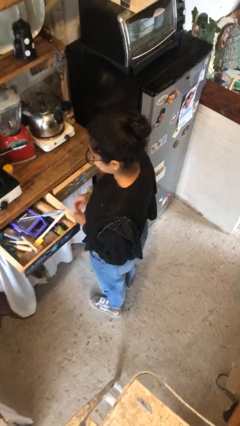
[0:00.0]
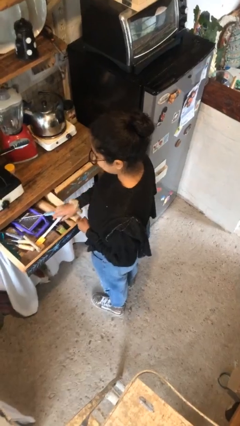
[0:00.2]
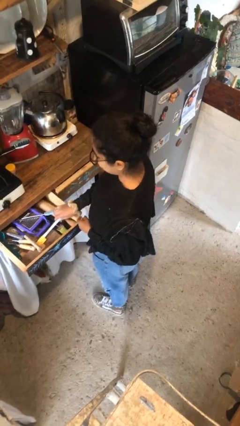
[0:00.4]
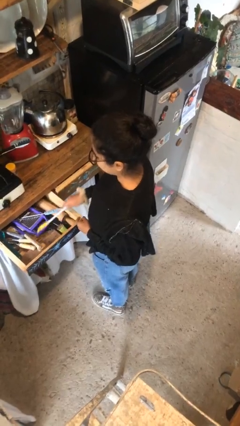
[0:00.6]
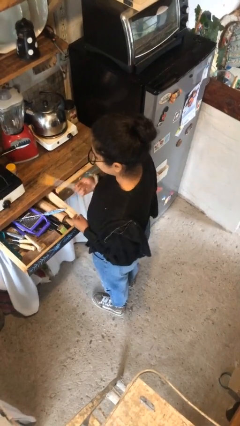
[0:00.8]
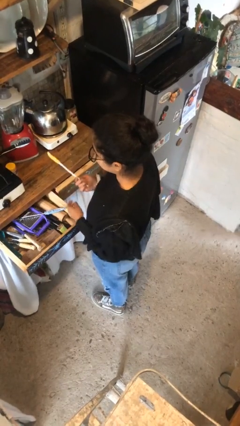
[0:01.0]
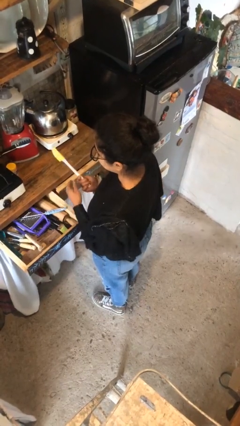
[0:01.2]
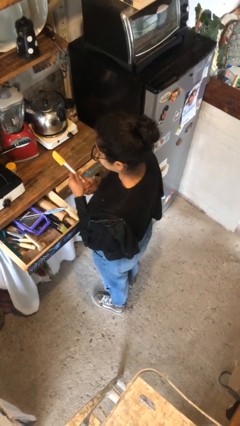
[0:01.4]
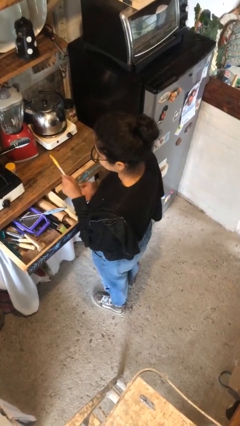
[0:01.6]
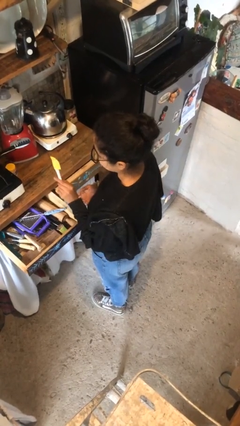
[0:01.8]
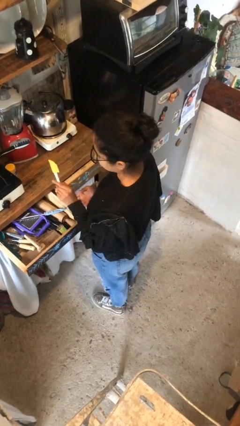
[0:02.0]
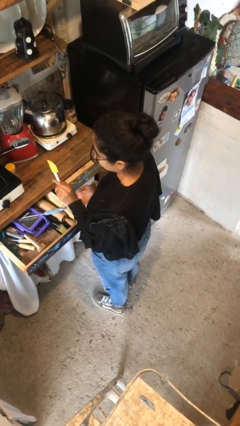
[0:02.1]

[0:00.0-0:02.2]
person takes object from kitchen drawer

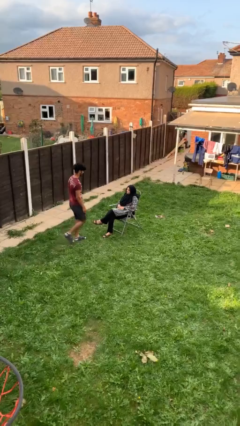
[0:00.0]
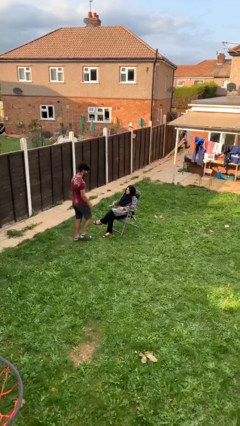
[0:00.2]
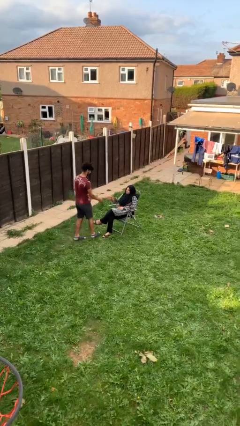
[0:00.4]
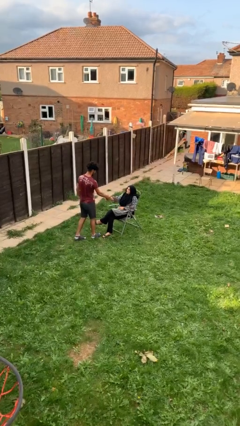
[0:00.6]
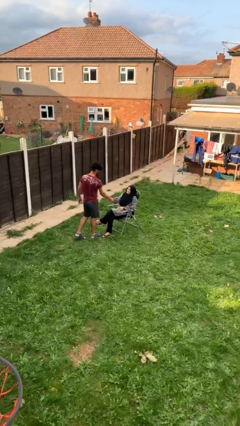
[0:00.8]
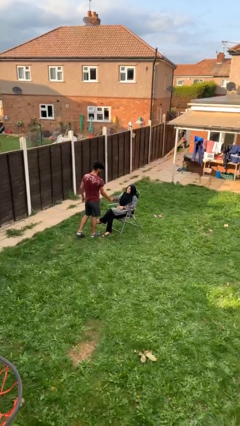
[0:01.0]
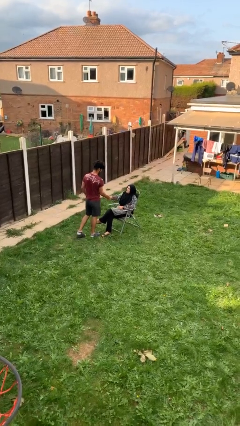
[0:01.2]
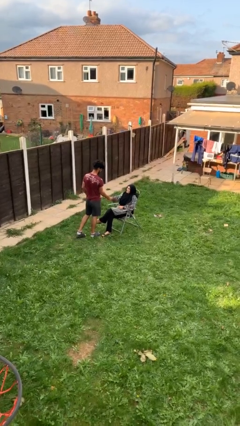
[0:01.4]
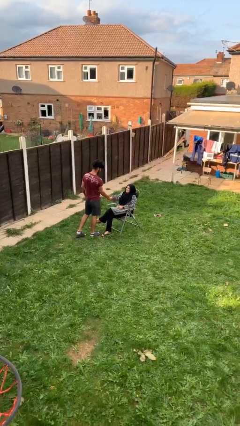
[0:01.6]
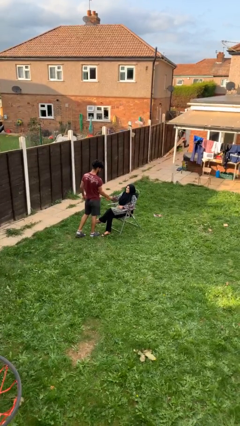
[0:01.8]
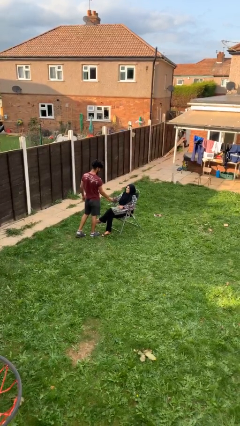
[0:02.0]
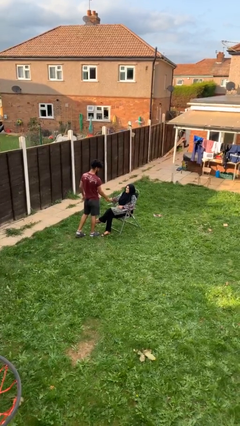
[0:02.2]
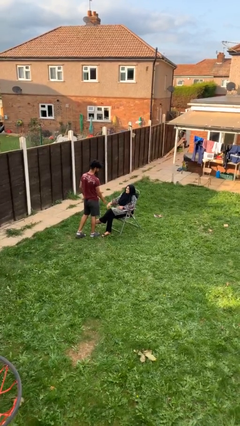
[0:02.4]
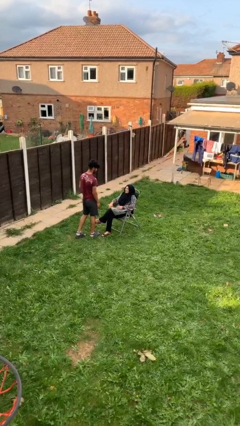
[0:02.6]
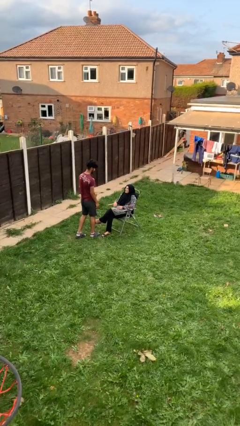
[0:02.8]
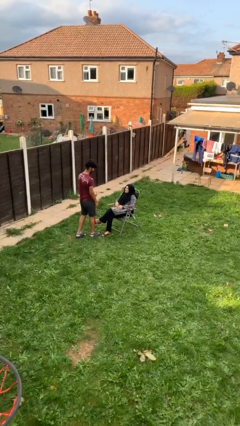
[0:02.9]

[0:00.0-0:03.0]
person shakes hand

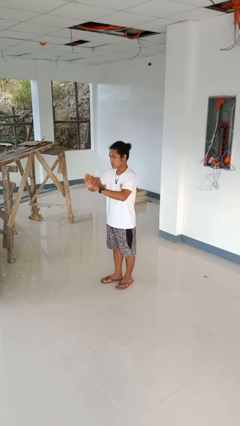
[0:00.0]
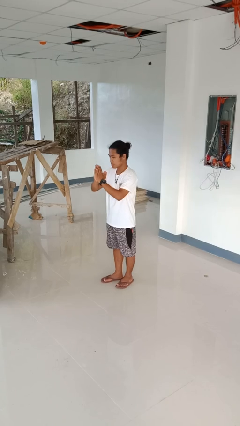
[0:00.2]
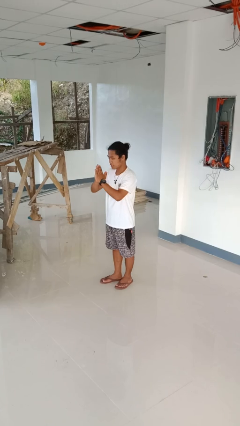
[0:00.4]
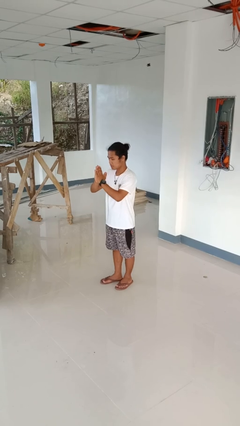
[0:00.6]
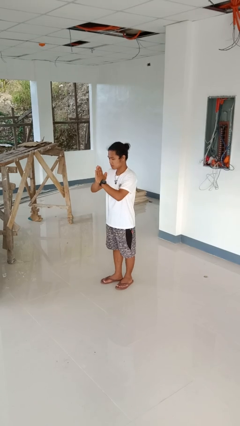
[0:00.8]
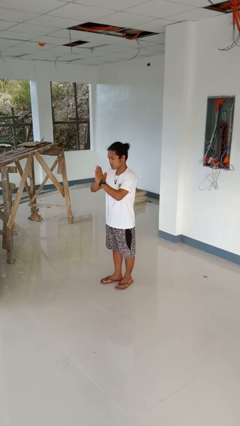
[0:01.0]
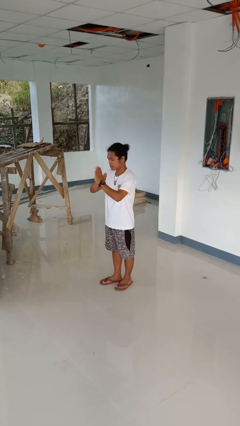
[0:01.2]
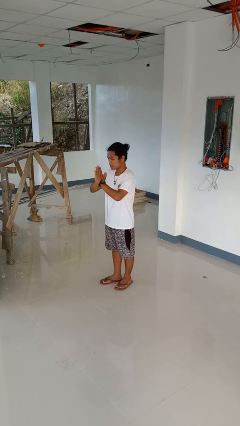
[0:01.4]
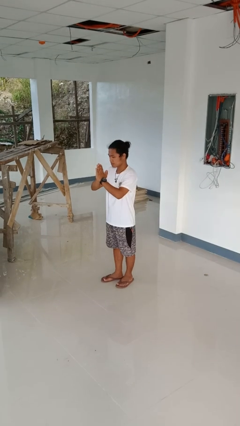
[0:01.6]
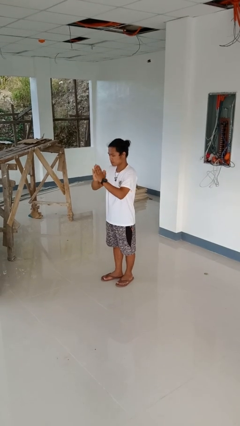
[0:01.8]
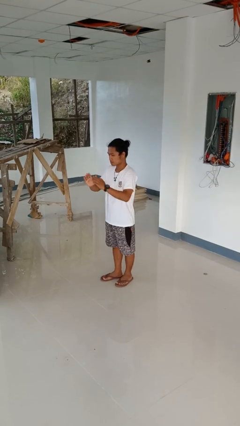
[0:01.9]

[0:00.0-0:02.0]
person prays

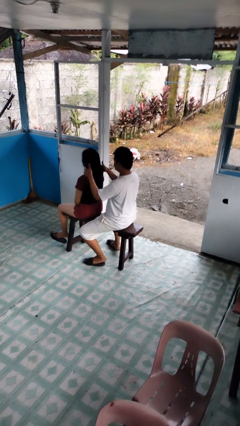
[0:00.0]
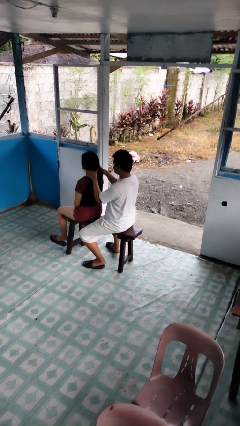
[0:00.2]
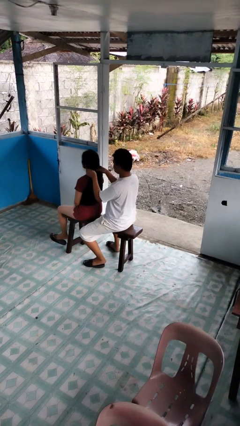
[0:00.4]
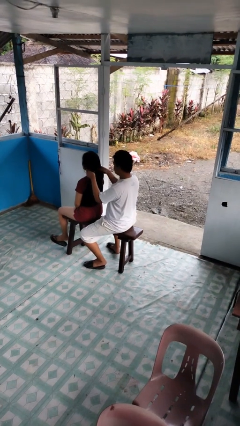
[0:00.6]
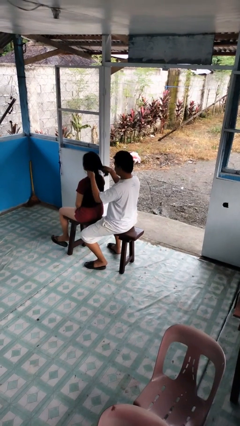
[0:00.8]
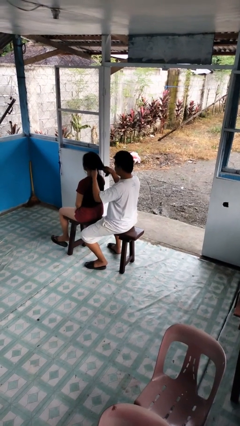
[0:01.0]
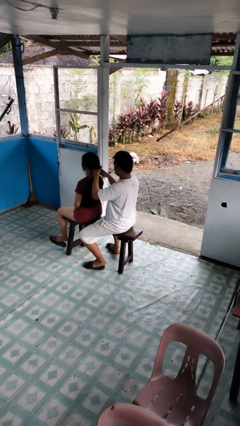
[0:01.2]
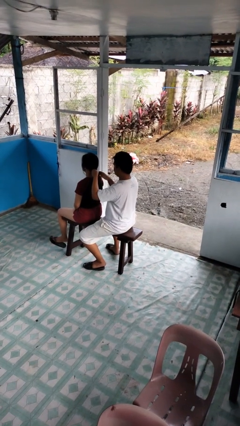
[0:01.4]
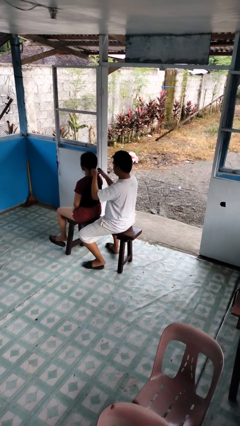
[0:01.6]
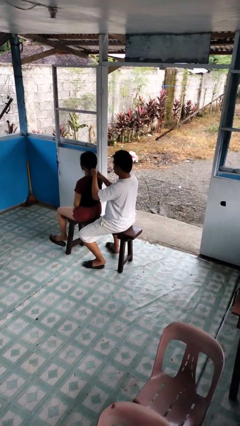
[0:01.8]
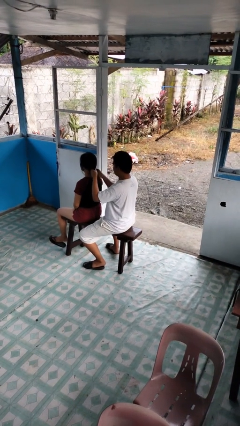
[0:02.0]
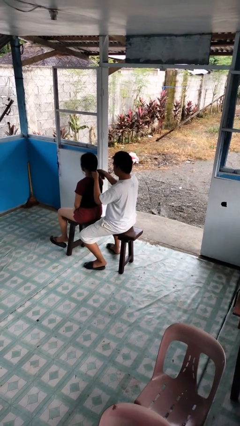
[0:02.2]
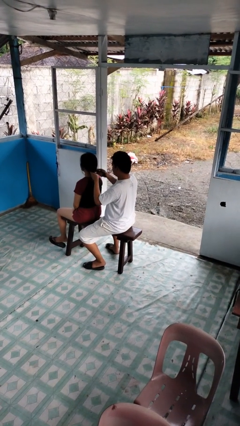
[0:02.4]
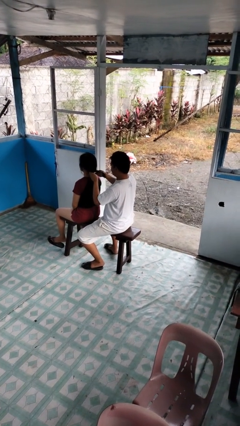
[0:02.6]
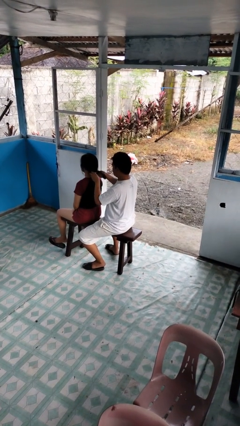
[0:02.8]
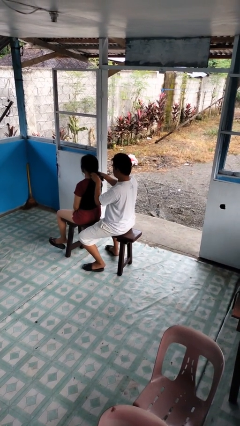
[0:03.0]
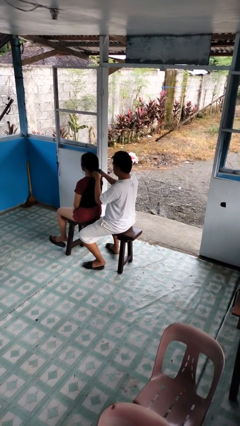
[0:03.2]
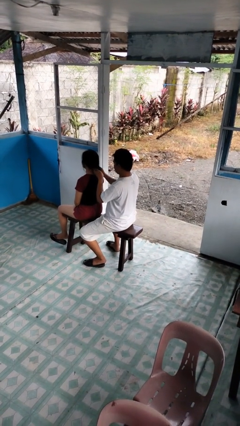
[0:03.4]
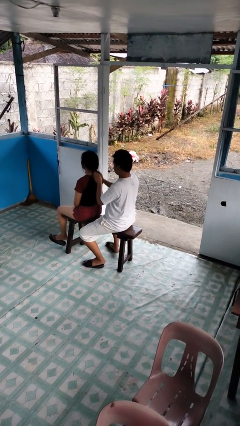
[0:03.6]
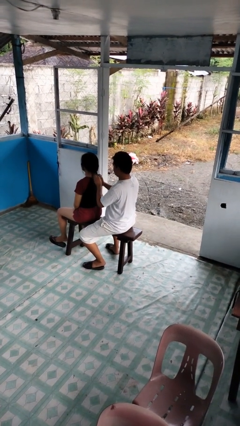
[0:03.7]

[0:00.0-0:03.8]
person braids hair of person

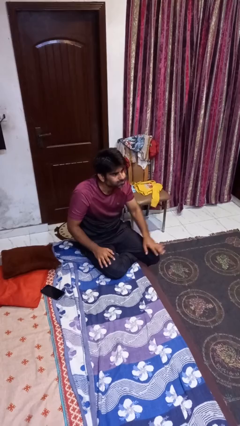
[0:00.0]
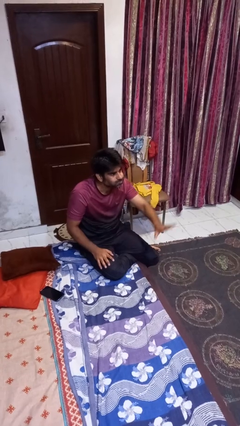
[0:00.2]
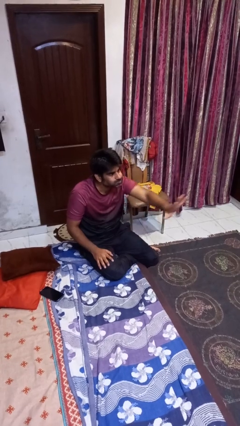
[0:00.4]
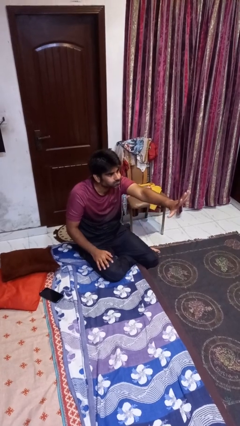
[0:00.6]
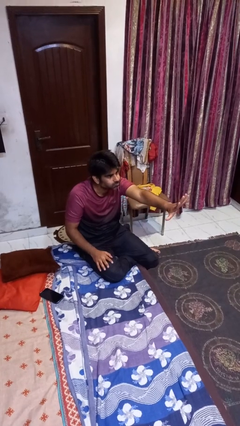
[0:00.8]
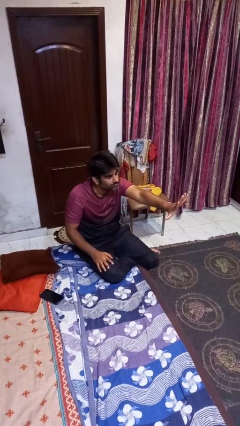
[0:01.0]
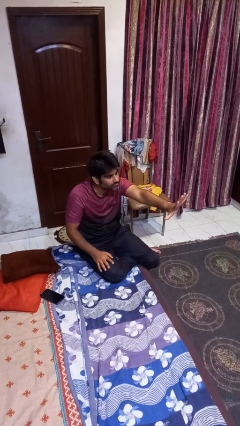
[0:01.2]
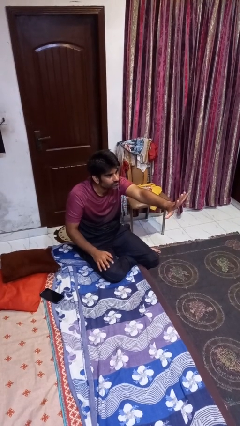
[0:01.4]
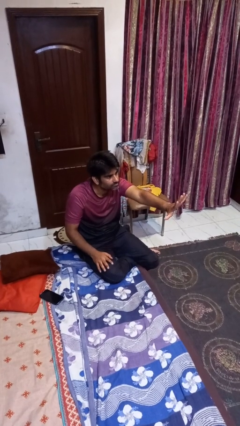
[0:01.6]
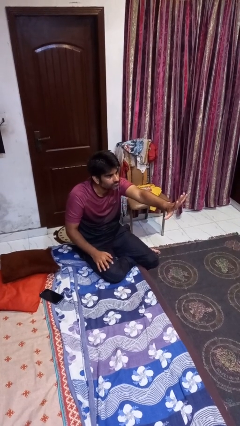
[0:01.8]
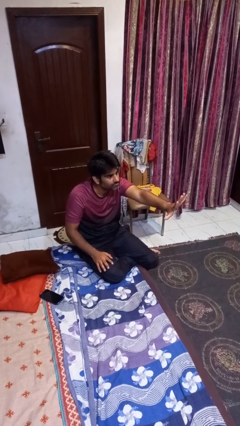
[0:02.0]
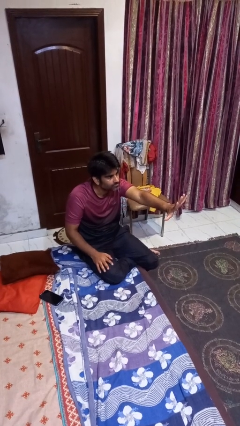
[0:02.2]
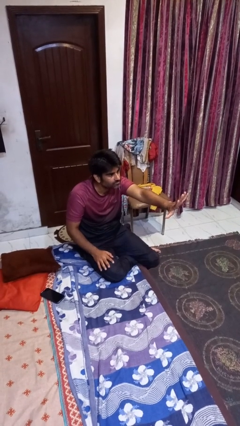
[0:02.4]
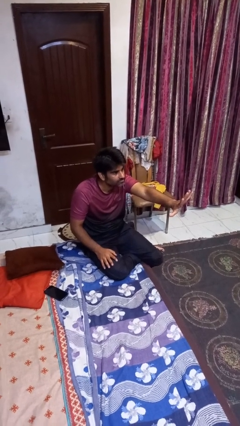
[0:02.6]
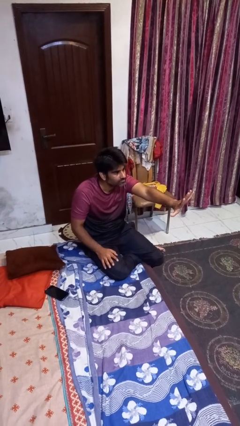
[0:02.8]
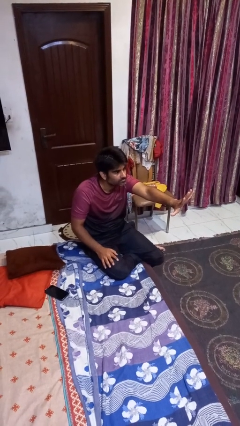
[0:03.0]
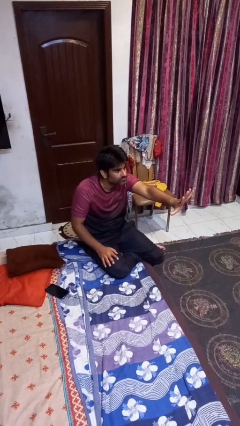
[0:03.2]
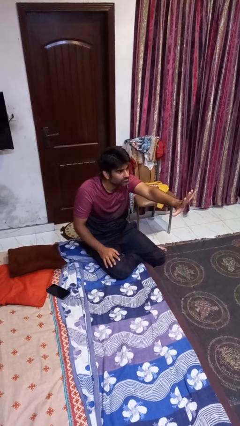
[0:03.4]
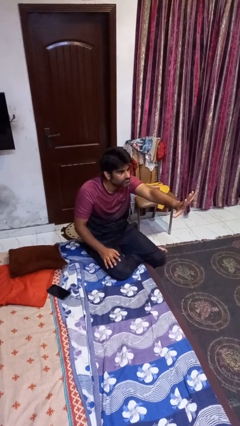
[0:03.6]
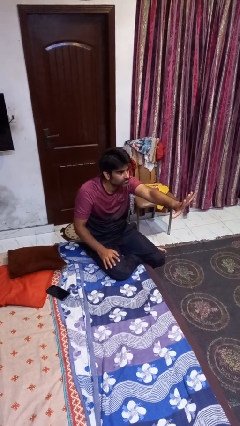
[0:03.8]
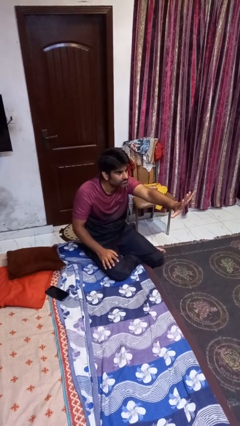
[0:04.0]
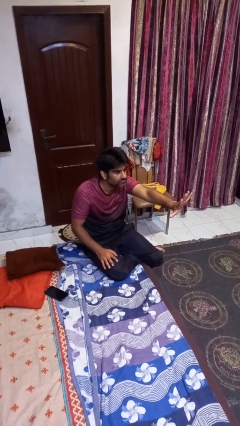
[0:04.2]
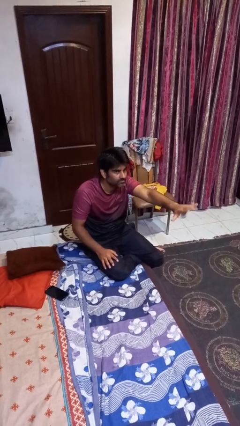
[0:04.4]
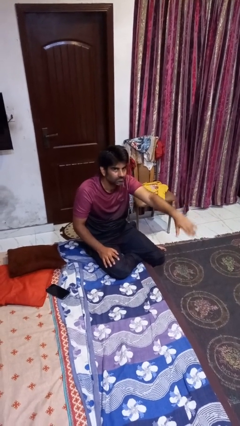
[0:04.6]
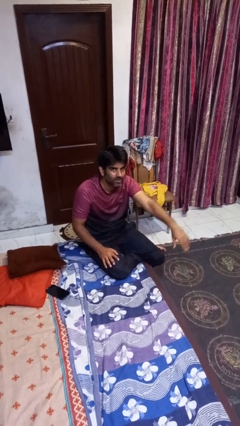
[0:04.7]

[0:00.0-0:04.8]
person gestures number five

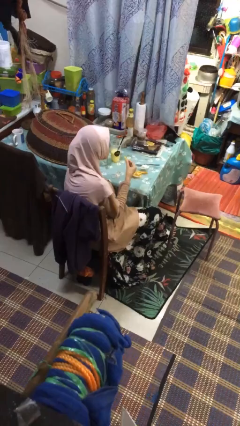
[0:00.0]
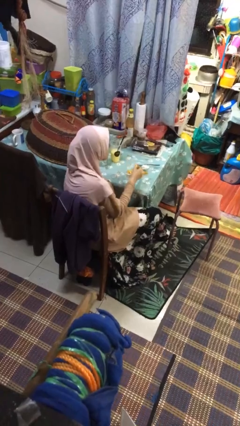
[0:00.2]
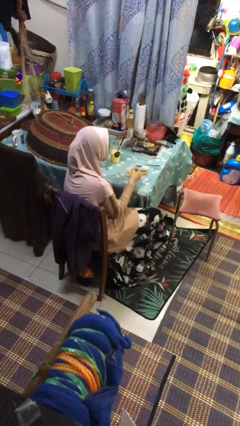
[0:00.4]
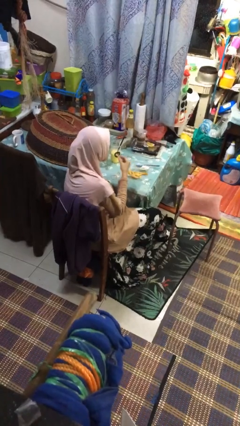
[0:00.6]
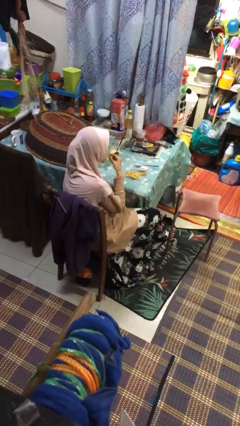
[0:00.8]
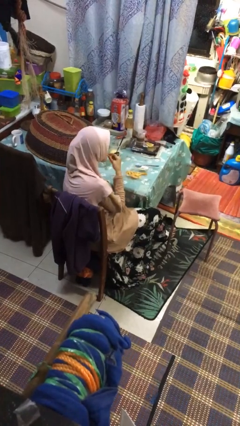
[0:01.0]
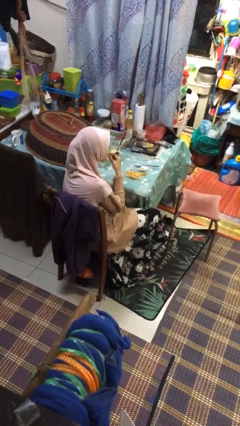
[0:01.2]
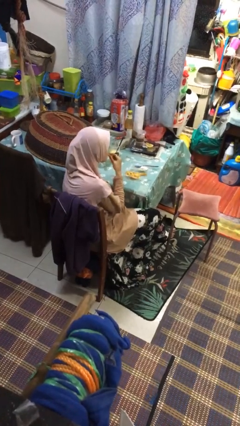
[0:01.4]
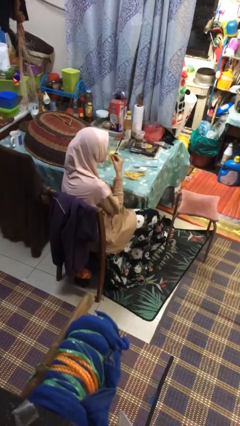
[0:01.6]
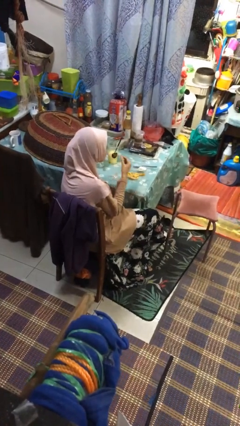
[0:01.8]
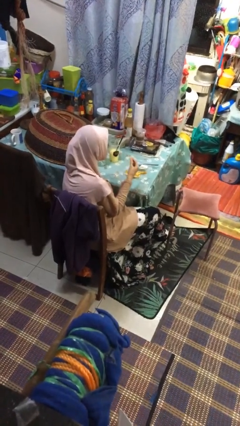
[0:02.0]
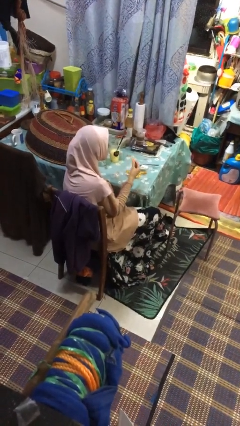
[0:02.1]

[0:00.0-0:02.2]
person eats with hands
